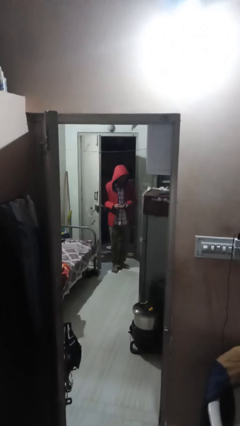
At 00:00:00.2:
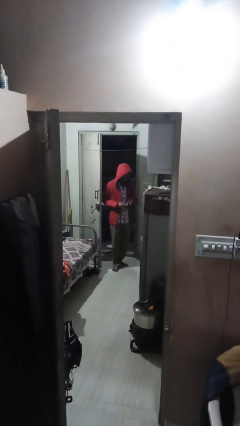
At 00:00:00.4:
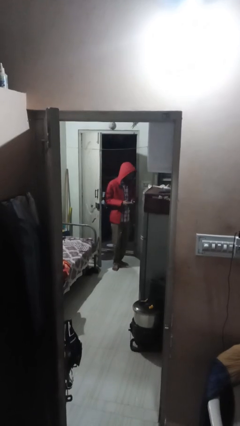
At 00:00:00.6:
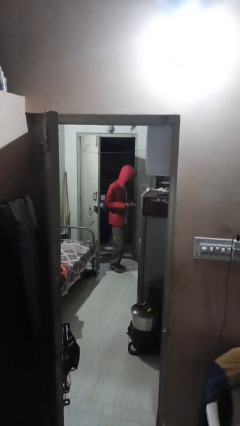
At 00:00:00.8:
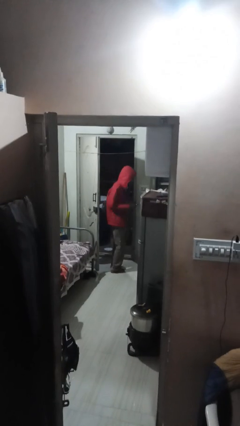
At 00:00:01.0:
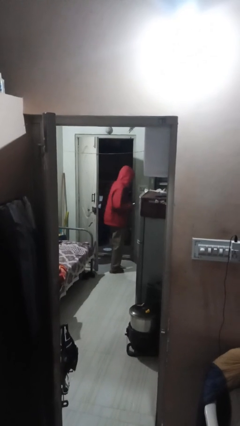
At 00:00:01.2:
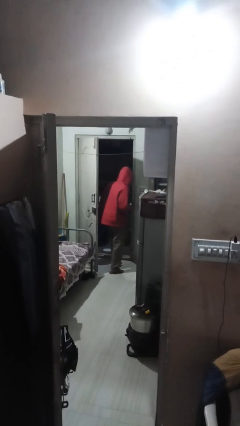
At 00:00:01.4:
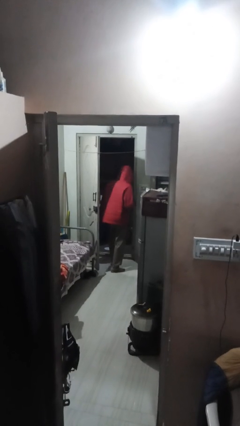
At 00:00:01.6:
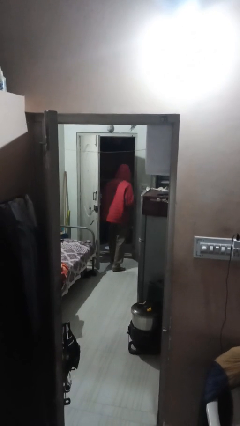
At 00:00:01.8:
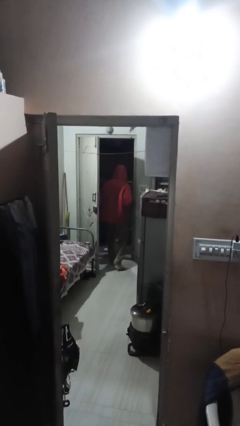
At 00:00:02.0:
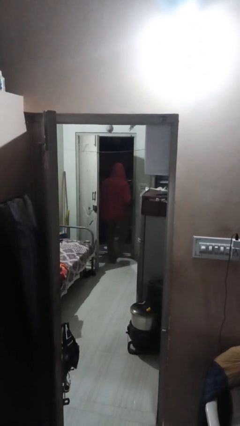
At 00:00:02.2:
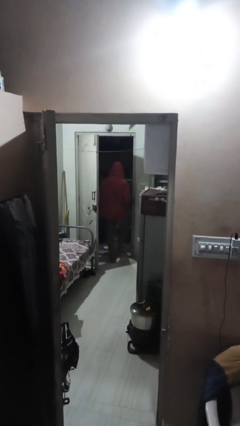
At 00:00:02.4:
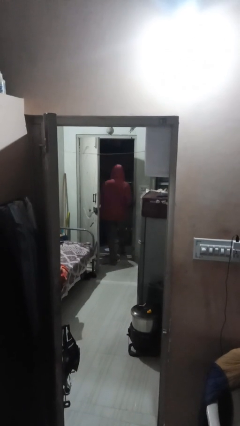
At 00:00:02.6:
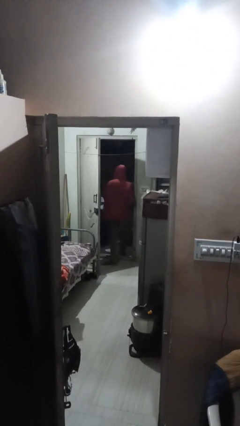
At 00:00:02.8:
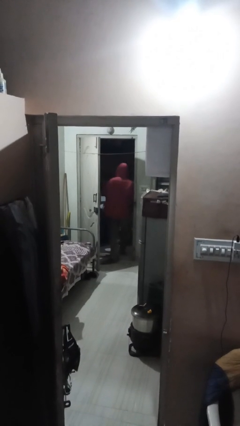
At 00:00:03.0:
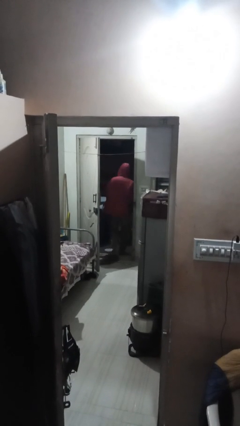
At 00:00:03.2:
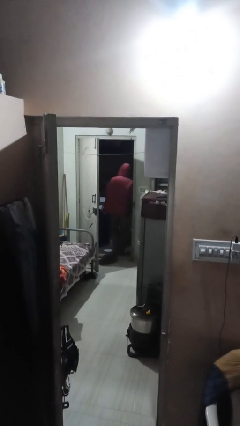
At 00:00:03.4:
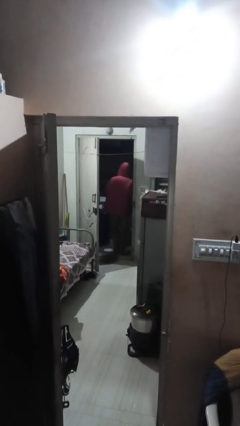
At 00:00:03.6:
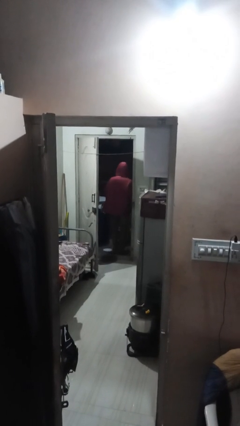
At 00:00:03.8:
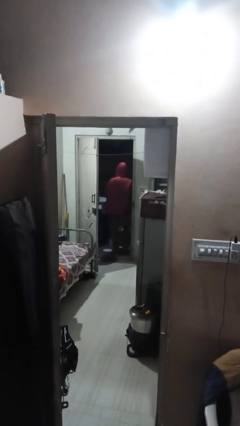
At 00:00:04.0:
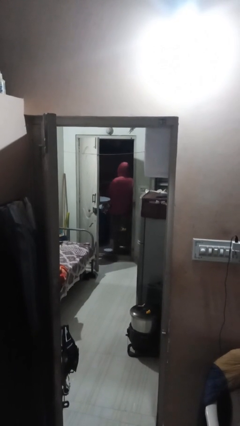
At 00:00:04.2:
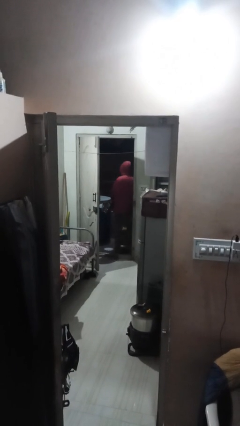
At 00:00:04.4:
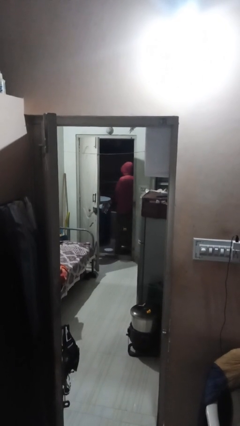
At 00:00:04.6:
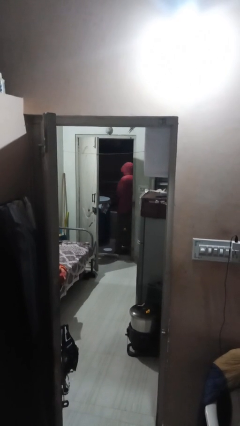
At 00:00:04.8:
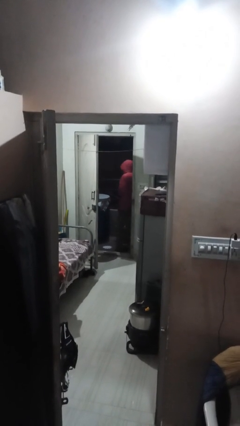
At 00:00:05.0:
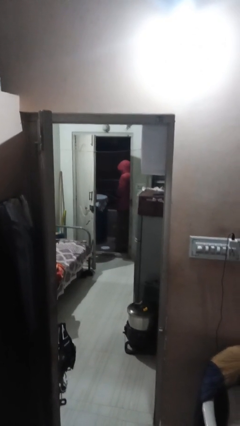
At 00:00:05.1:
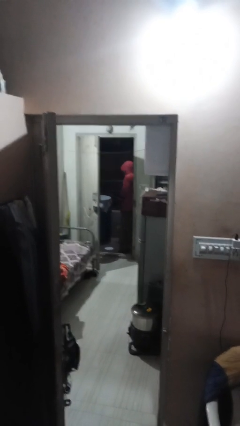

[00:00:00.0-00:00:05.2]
person exits scene through structure

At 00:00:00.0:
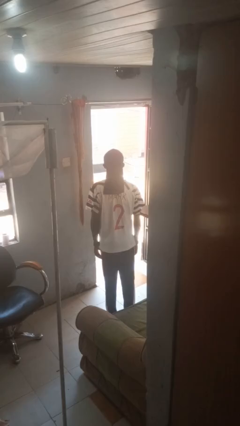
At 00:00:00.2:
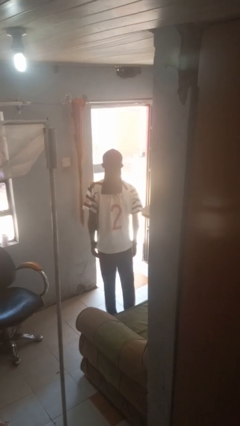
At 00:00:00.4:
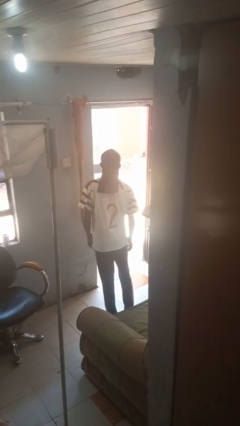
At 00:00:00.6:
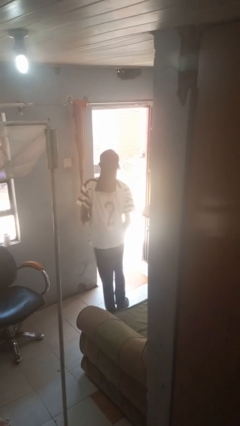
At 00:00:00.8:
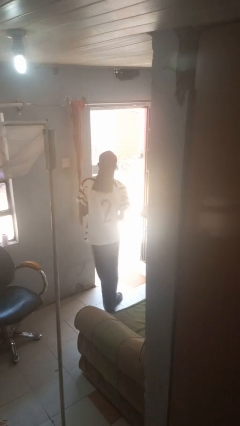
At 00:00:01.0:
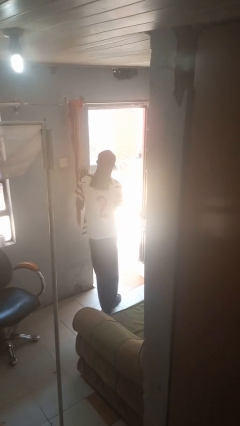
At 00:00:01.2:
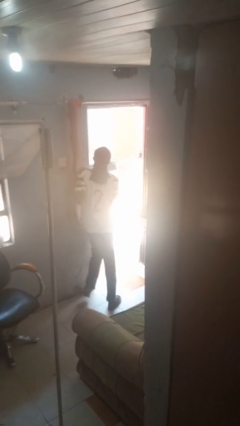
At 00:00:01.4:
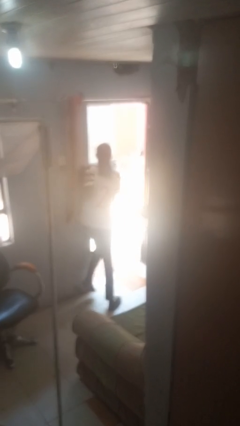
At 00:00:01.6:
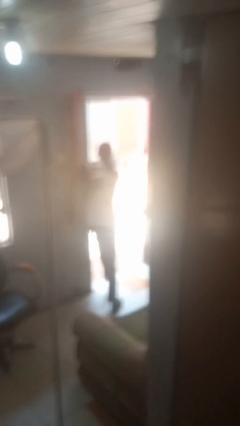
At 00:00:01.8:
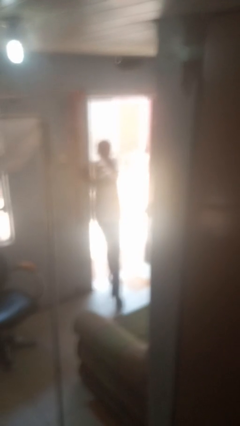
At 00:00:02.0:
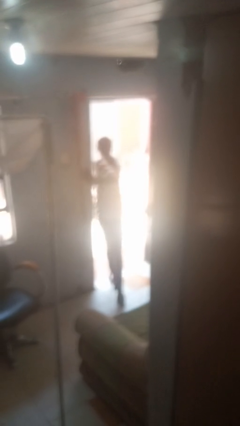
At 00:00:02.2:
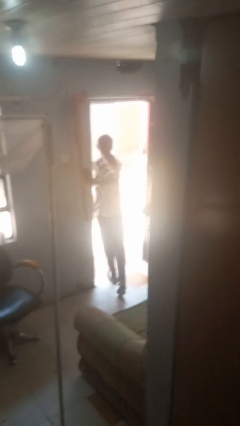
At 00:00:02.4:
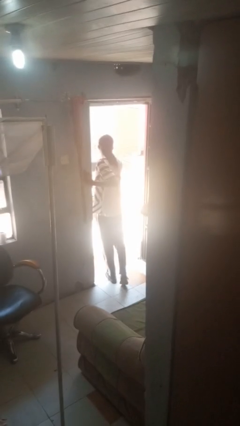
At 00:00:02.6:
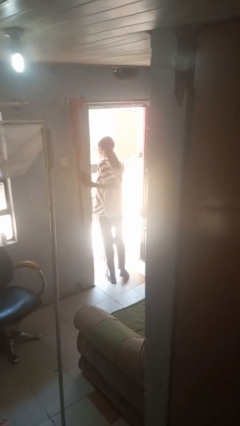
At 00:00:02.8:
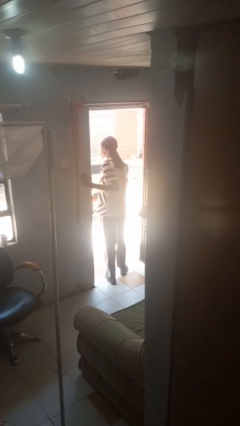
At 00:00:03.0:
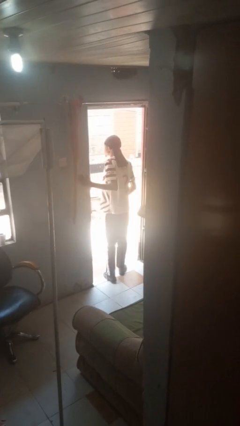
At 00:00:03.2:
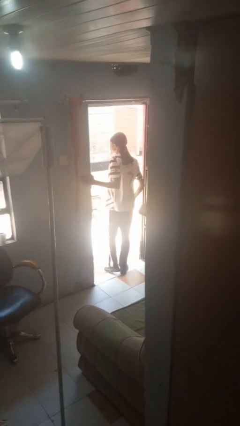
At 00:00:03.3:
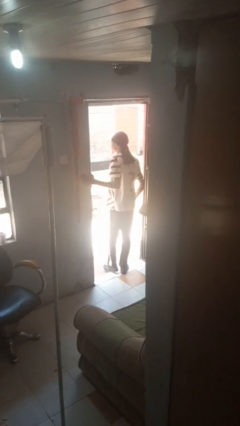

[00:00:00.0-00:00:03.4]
person bumps into wall

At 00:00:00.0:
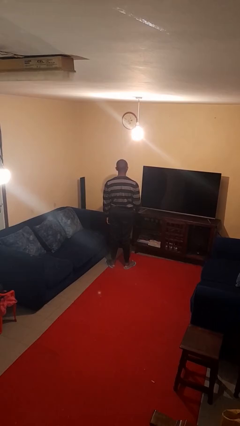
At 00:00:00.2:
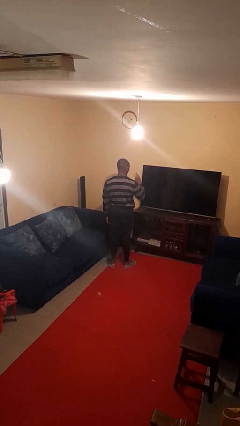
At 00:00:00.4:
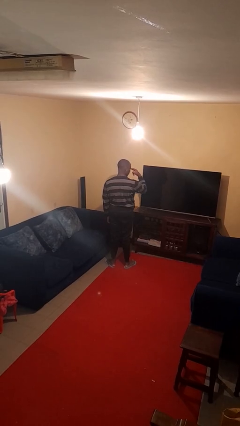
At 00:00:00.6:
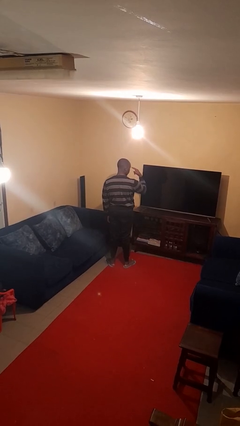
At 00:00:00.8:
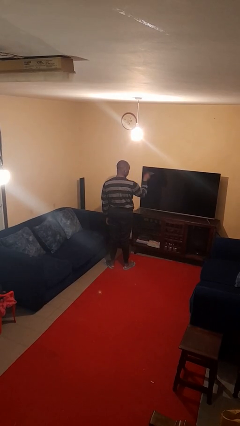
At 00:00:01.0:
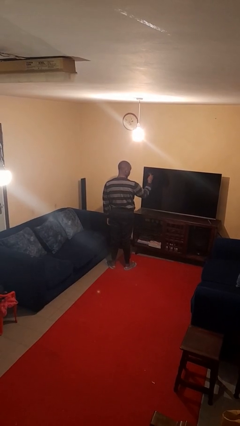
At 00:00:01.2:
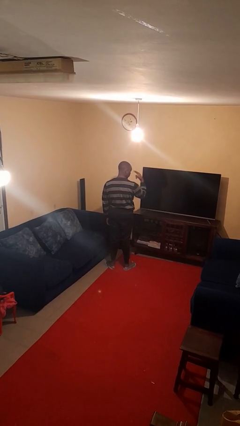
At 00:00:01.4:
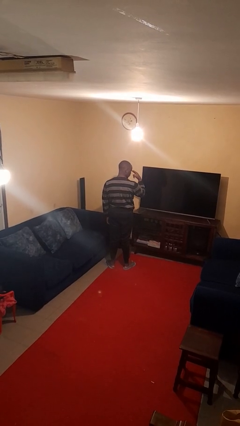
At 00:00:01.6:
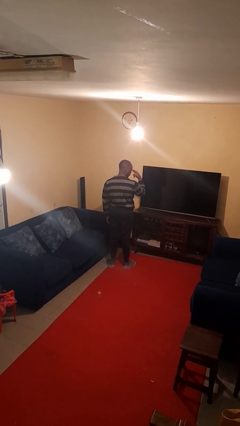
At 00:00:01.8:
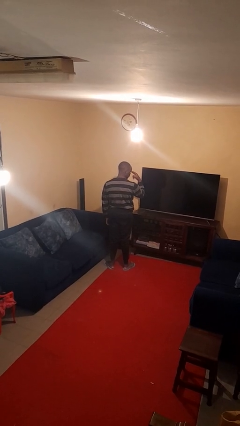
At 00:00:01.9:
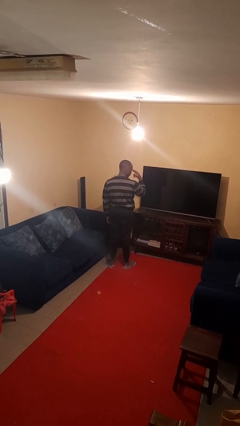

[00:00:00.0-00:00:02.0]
person gestures watch closely

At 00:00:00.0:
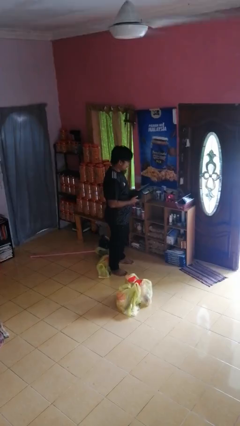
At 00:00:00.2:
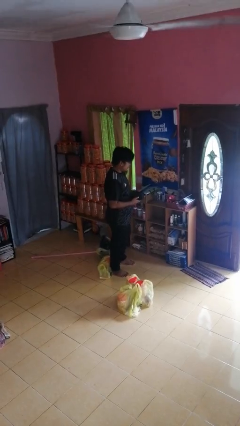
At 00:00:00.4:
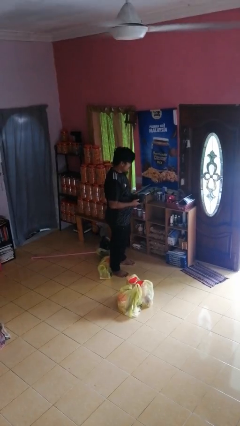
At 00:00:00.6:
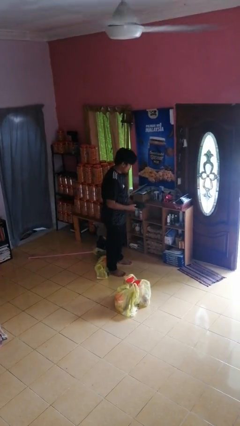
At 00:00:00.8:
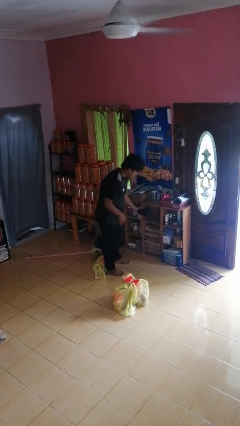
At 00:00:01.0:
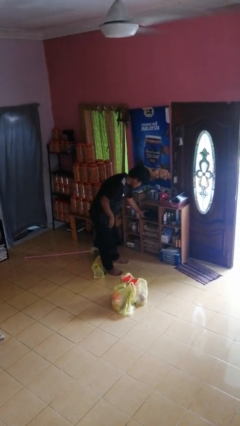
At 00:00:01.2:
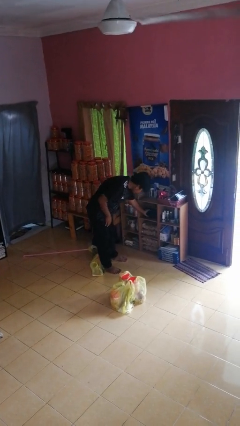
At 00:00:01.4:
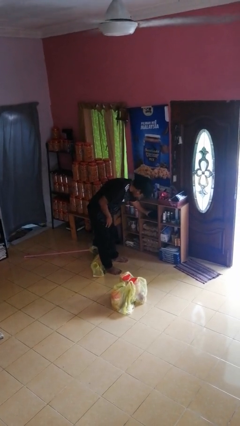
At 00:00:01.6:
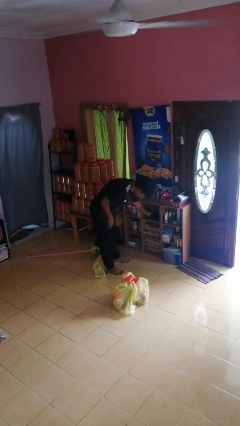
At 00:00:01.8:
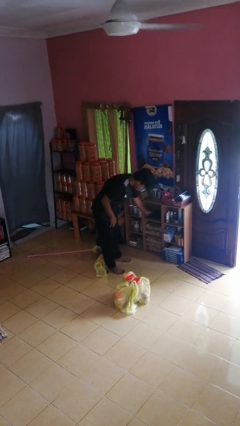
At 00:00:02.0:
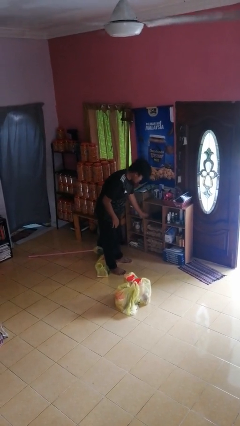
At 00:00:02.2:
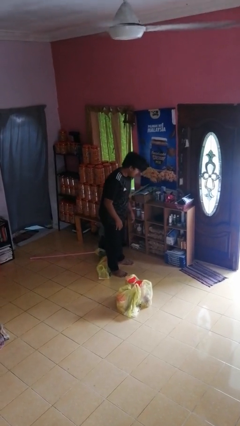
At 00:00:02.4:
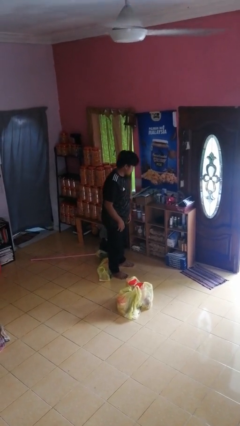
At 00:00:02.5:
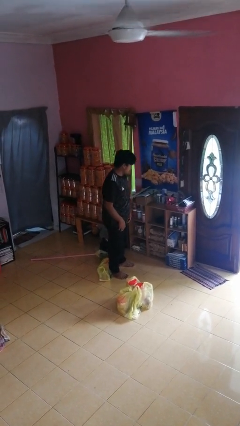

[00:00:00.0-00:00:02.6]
person puts object in cabinet

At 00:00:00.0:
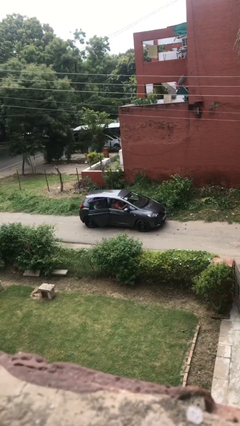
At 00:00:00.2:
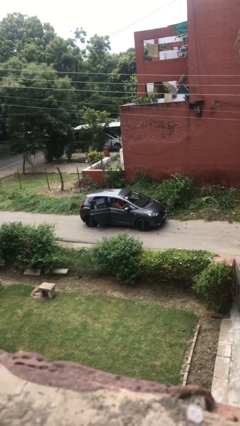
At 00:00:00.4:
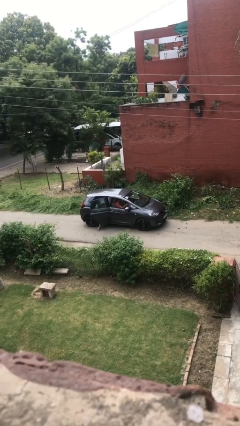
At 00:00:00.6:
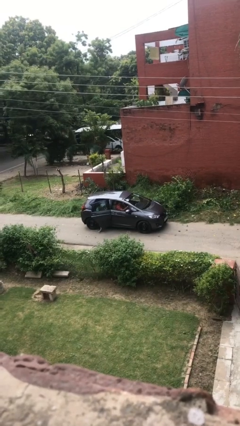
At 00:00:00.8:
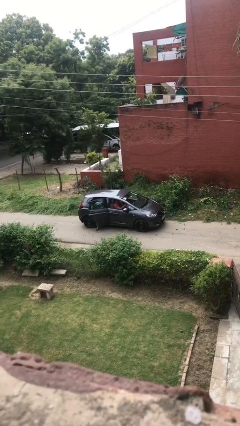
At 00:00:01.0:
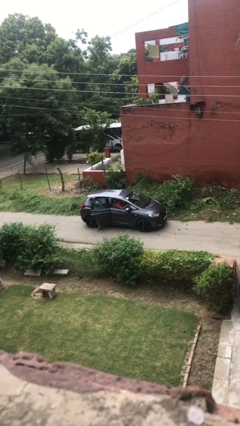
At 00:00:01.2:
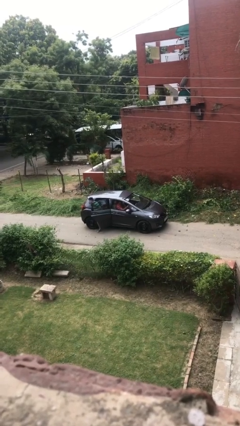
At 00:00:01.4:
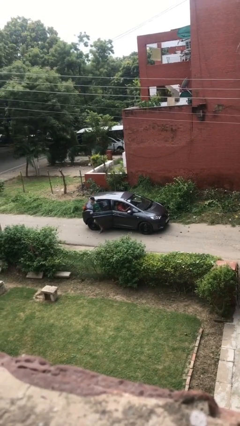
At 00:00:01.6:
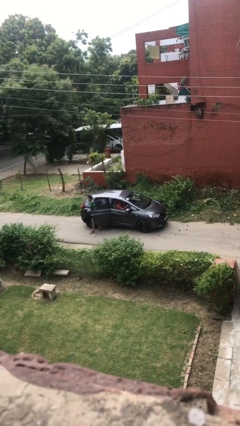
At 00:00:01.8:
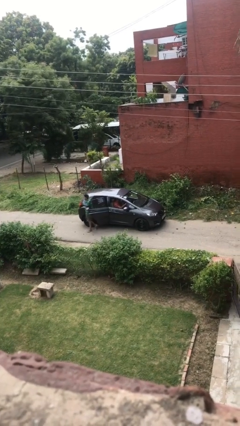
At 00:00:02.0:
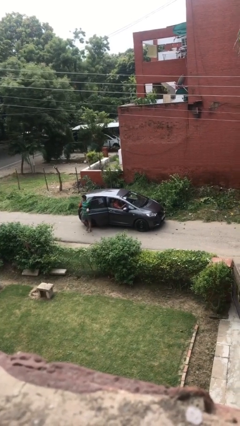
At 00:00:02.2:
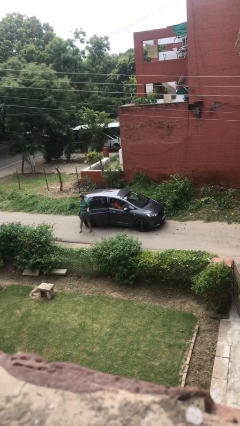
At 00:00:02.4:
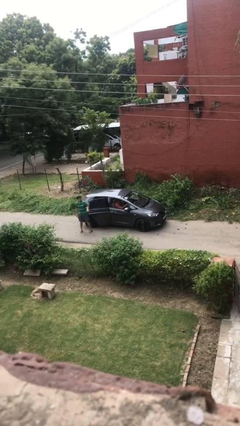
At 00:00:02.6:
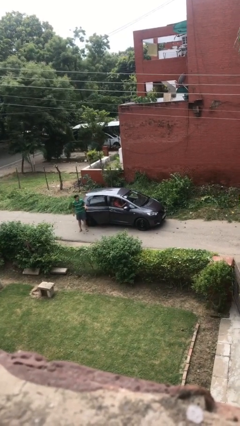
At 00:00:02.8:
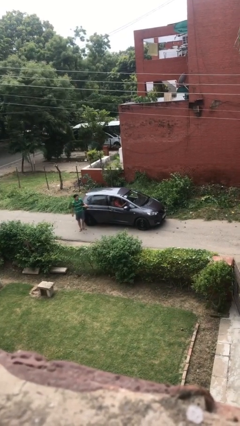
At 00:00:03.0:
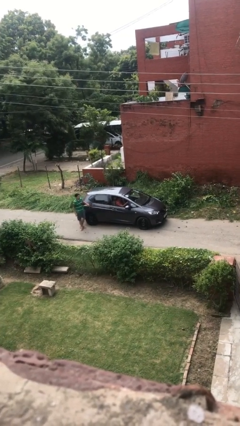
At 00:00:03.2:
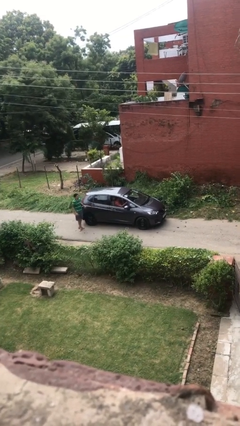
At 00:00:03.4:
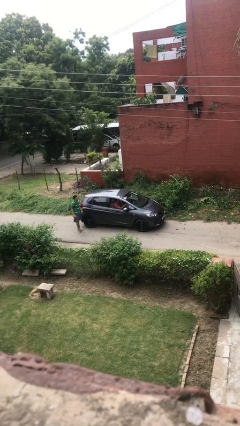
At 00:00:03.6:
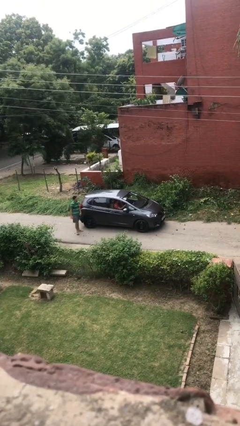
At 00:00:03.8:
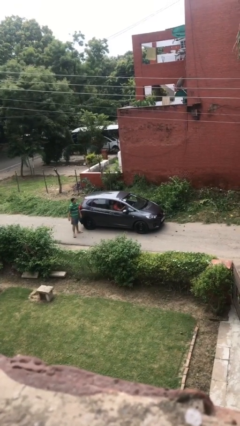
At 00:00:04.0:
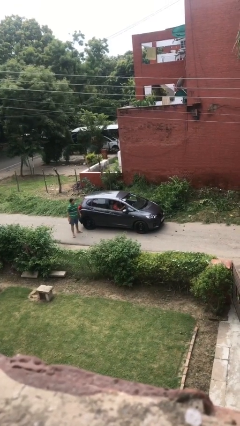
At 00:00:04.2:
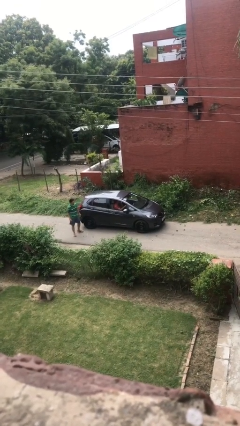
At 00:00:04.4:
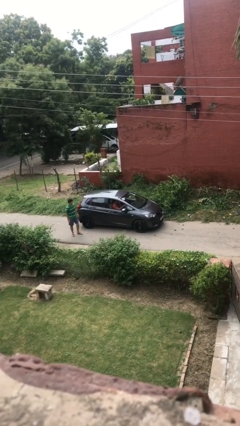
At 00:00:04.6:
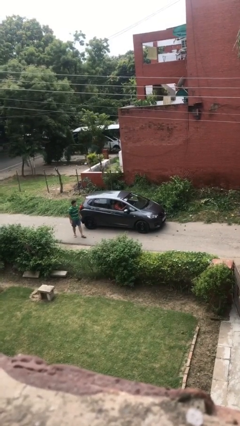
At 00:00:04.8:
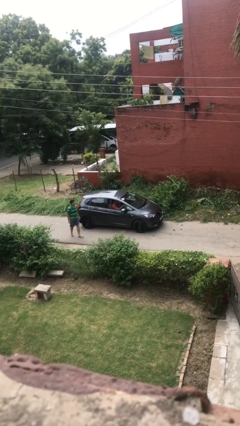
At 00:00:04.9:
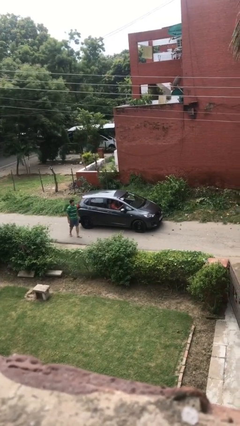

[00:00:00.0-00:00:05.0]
car drops off person
